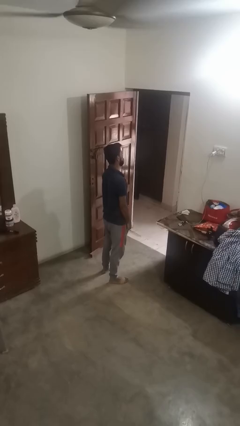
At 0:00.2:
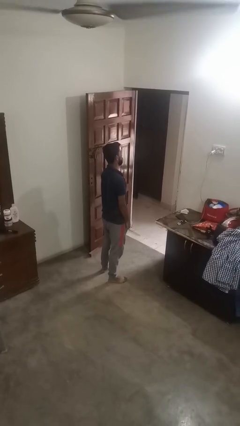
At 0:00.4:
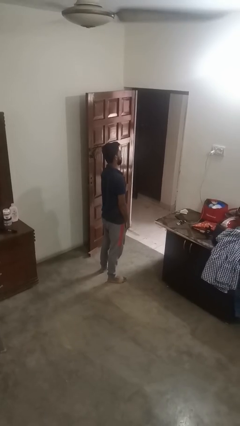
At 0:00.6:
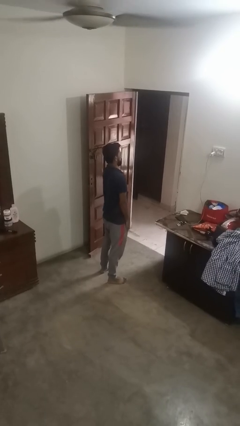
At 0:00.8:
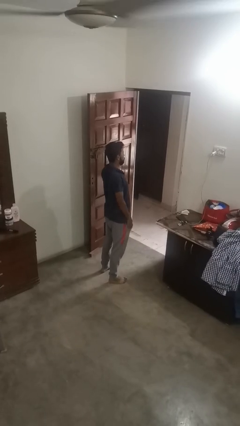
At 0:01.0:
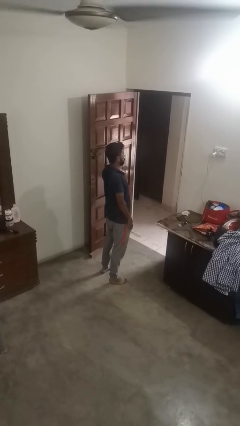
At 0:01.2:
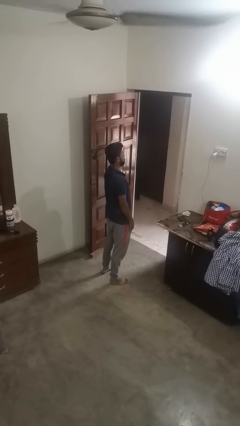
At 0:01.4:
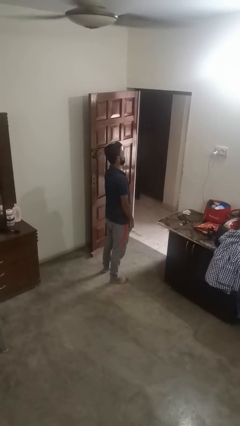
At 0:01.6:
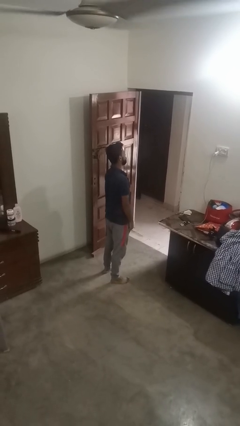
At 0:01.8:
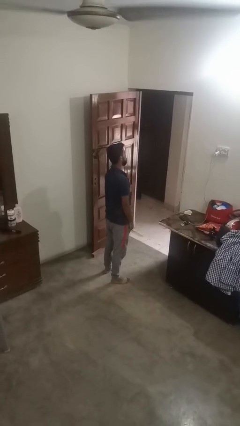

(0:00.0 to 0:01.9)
person shrugs

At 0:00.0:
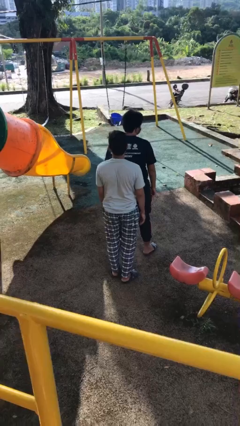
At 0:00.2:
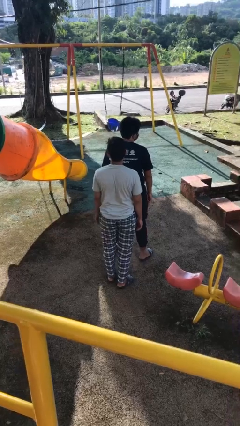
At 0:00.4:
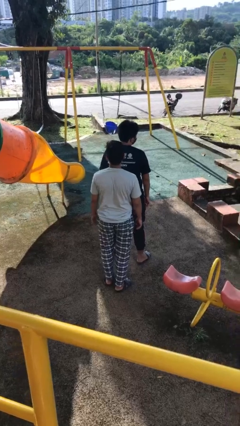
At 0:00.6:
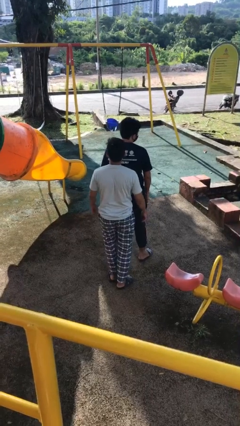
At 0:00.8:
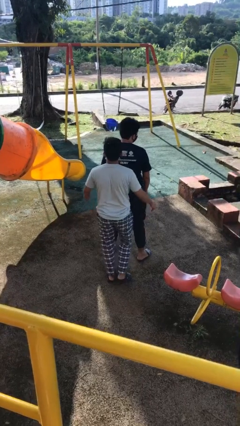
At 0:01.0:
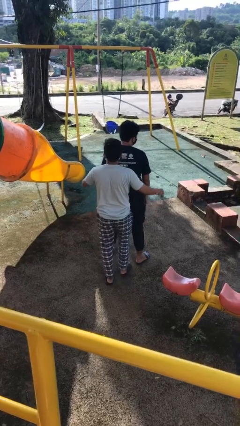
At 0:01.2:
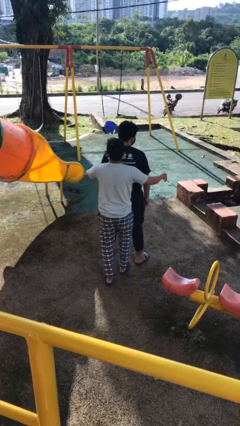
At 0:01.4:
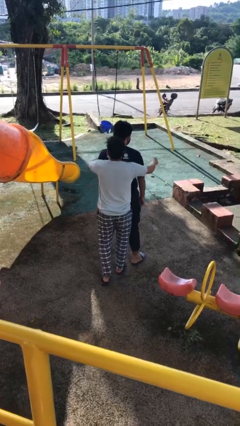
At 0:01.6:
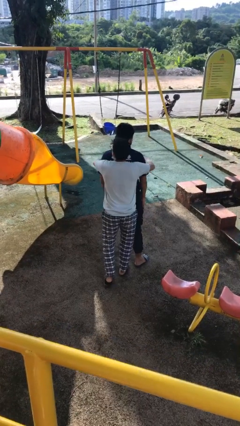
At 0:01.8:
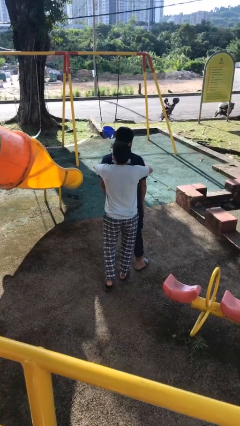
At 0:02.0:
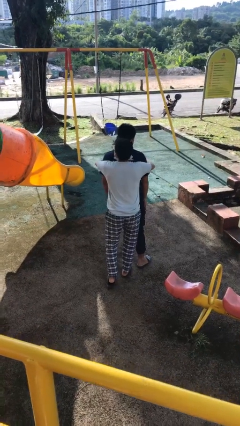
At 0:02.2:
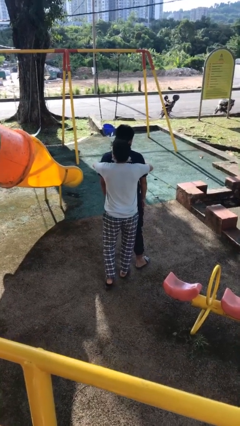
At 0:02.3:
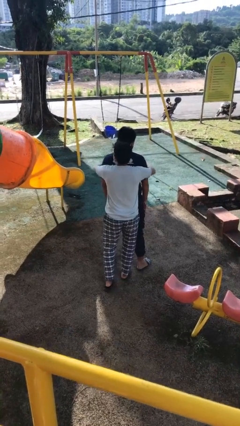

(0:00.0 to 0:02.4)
person hugs person from behind

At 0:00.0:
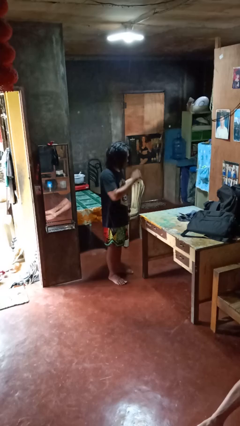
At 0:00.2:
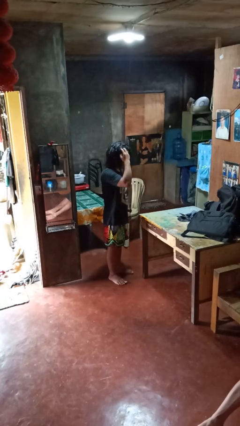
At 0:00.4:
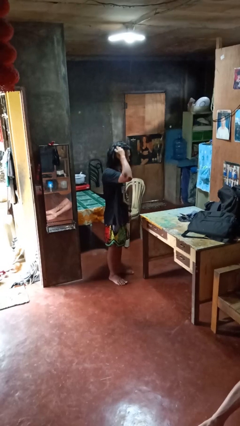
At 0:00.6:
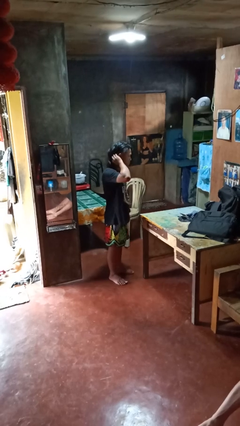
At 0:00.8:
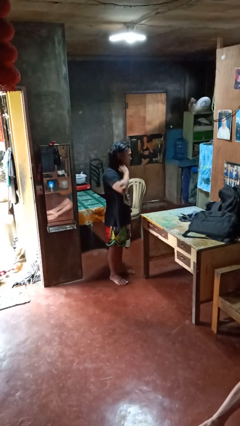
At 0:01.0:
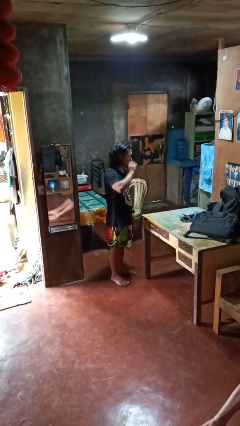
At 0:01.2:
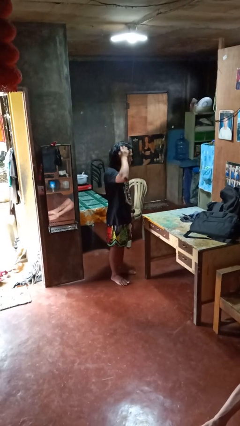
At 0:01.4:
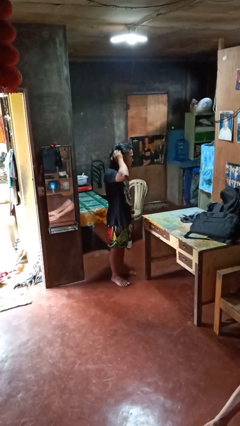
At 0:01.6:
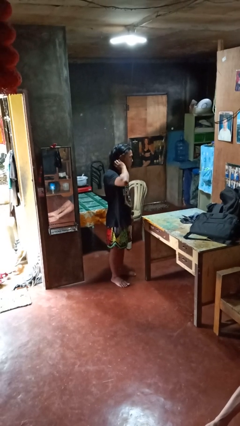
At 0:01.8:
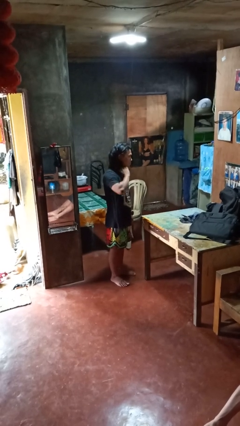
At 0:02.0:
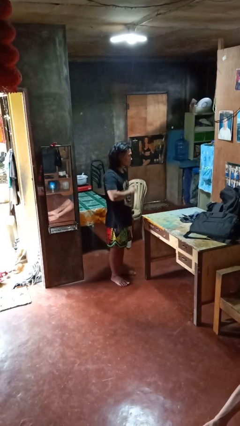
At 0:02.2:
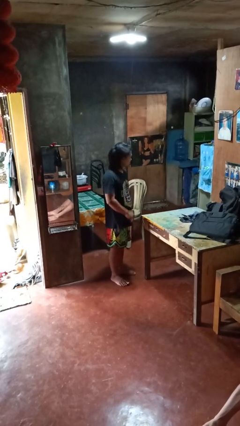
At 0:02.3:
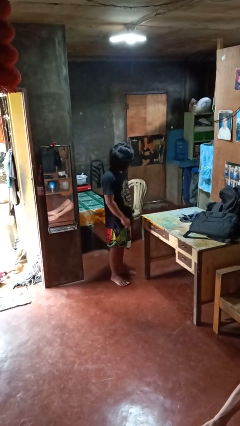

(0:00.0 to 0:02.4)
person strokes hair

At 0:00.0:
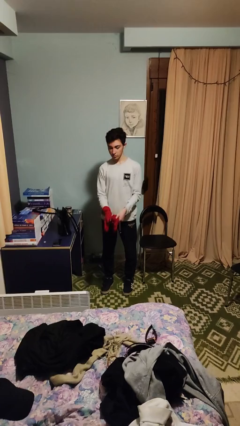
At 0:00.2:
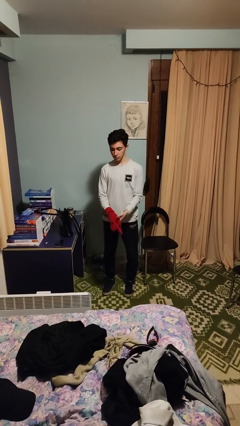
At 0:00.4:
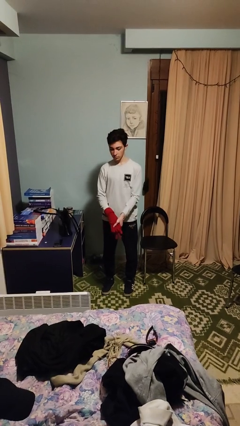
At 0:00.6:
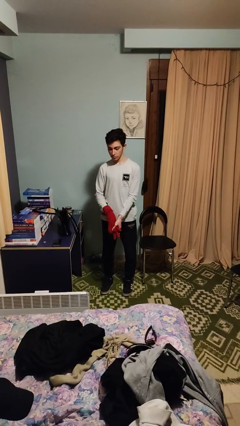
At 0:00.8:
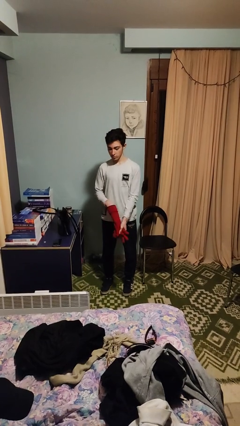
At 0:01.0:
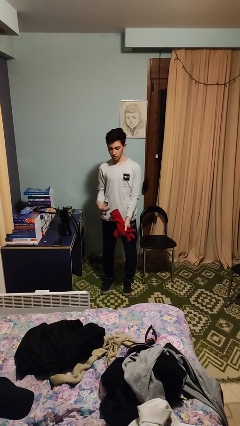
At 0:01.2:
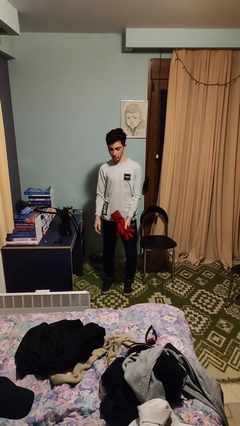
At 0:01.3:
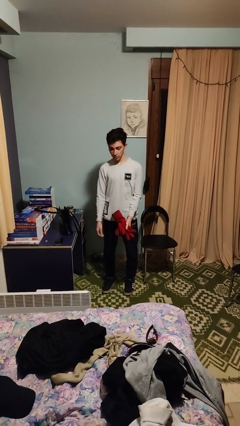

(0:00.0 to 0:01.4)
person takes off gloves

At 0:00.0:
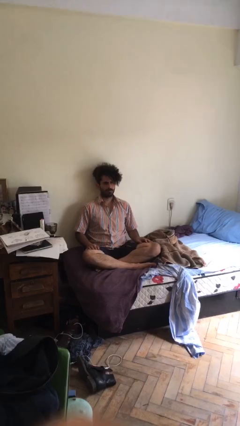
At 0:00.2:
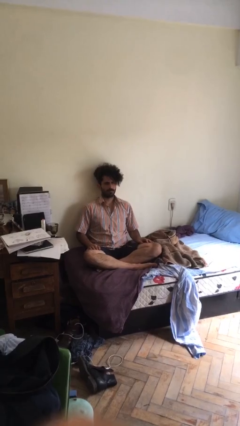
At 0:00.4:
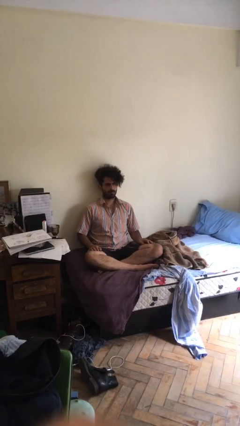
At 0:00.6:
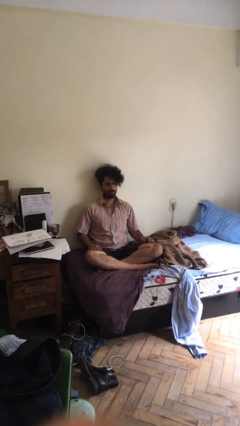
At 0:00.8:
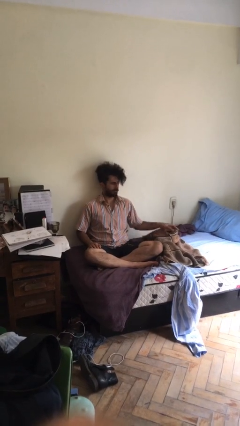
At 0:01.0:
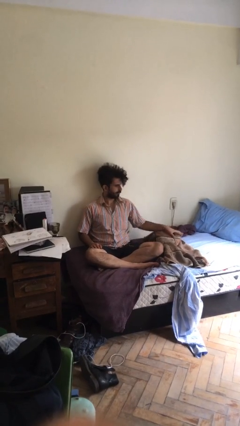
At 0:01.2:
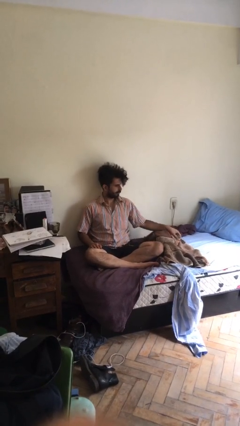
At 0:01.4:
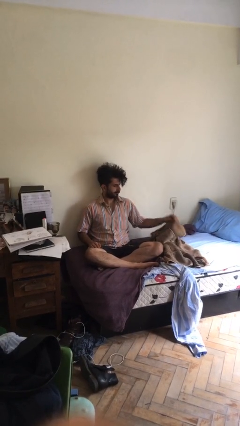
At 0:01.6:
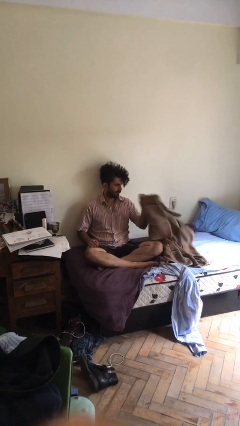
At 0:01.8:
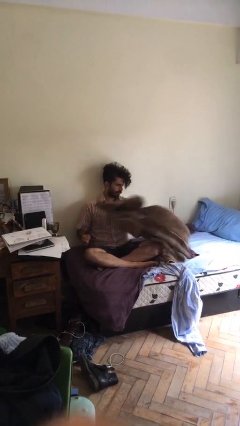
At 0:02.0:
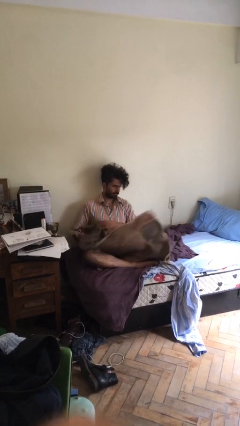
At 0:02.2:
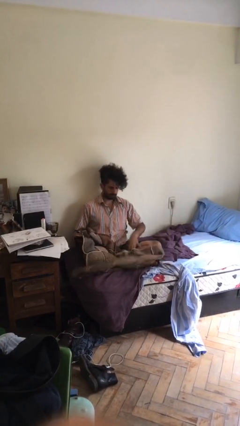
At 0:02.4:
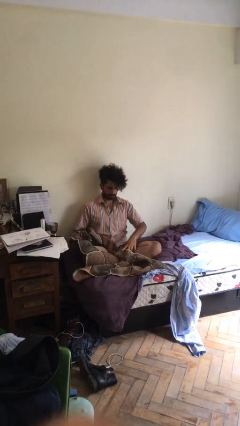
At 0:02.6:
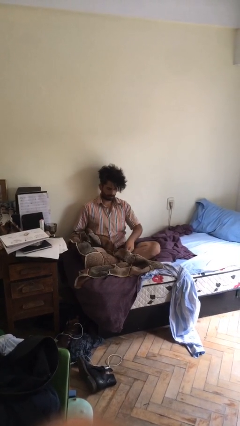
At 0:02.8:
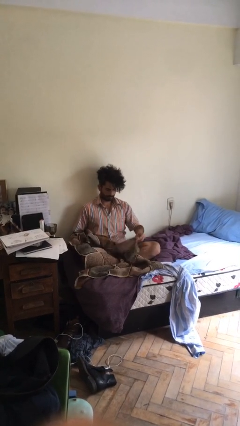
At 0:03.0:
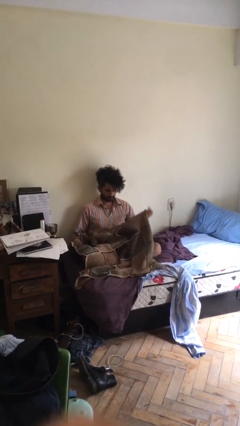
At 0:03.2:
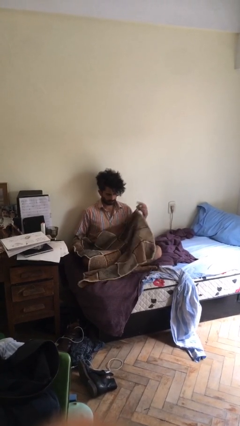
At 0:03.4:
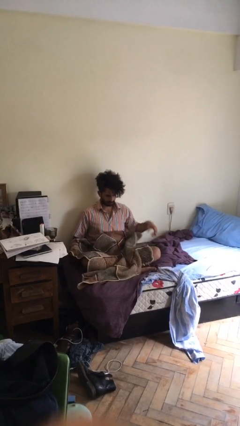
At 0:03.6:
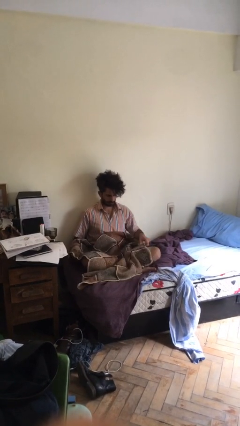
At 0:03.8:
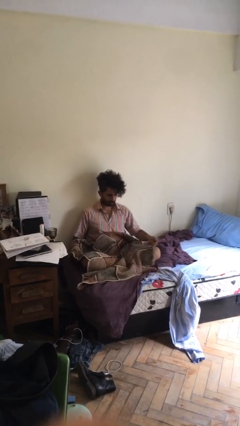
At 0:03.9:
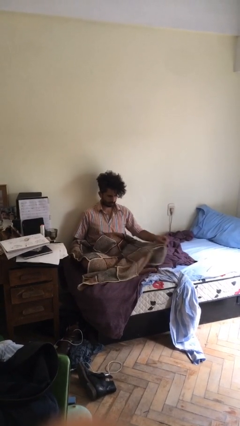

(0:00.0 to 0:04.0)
person covers with blanket

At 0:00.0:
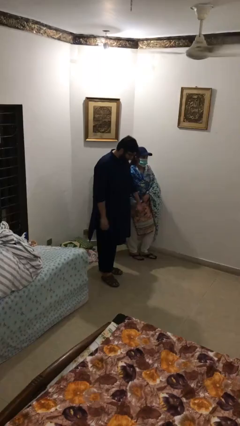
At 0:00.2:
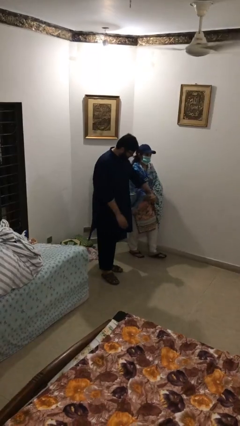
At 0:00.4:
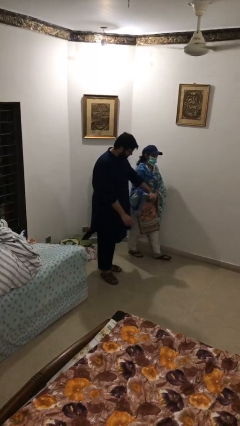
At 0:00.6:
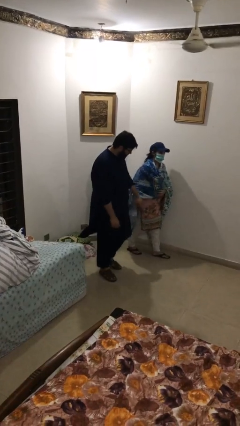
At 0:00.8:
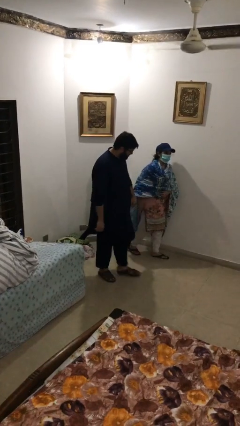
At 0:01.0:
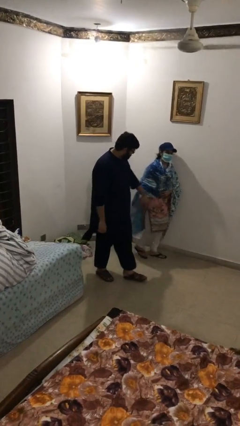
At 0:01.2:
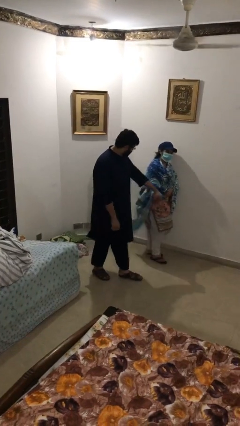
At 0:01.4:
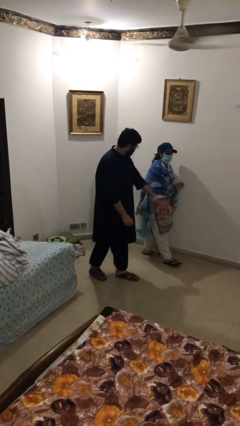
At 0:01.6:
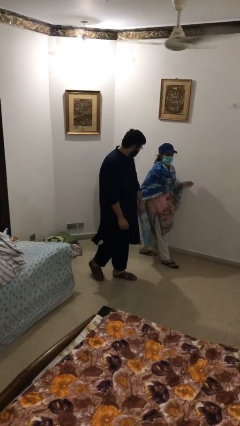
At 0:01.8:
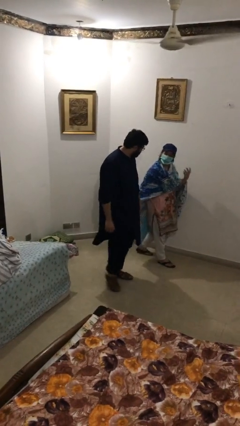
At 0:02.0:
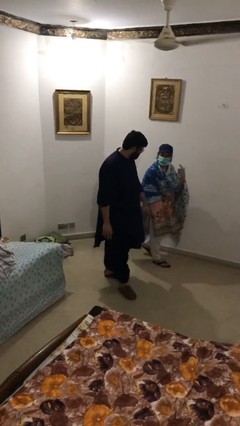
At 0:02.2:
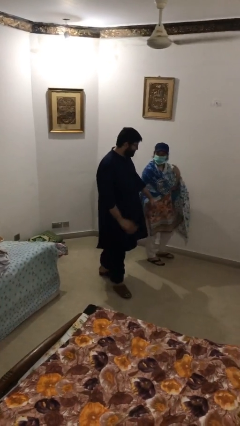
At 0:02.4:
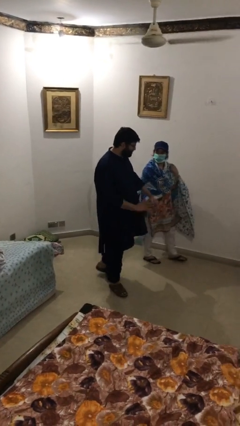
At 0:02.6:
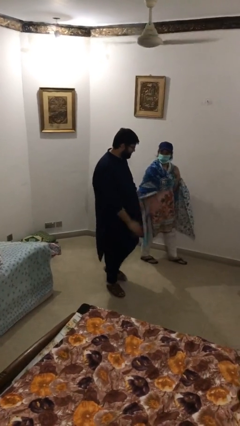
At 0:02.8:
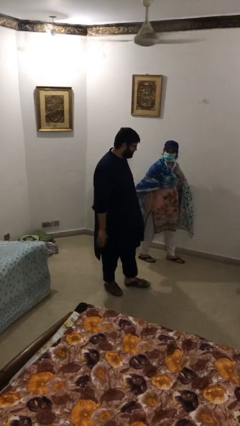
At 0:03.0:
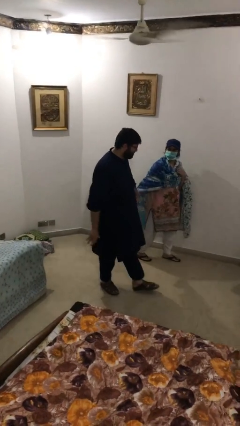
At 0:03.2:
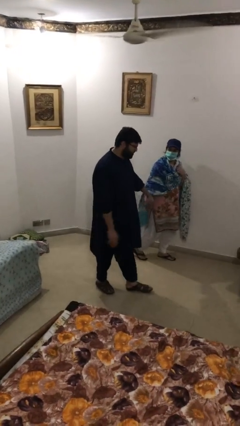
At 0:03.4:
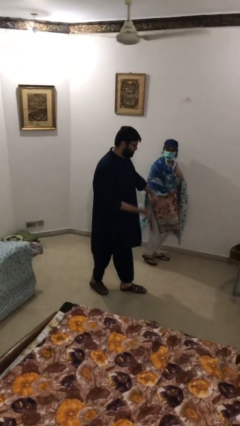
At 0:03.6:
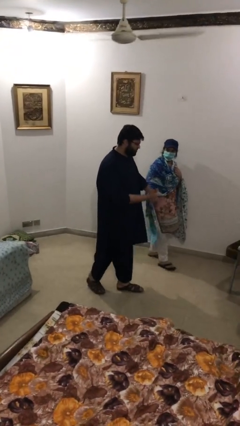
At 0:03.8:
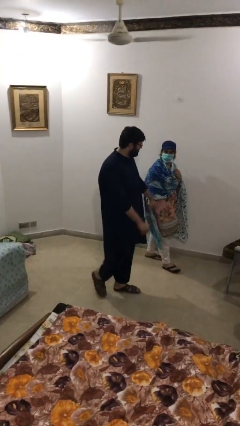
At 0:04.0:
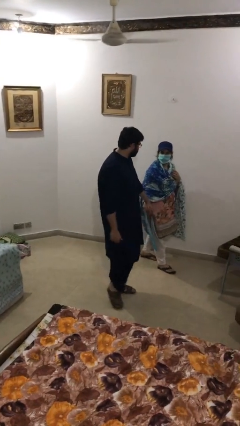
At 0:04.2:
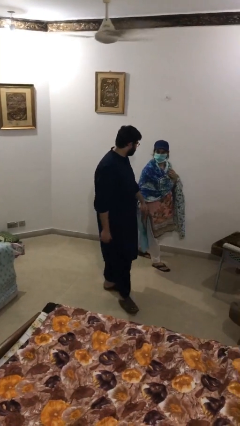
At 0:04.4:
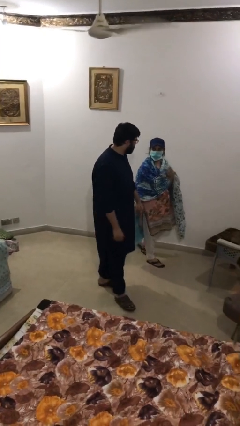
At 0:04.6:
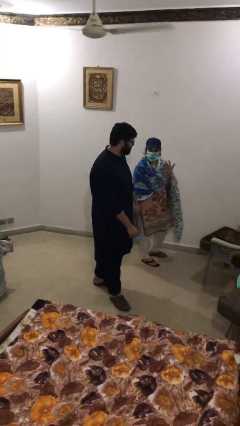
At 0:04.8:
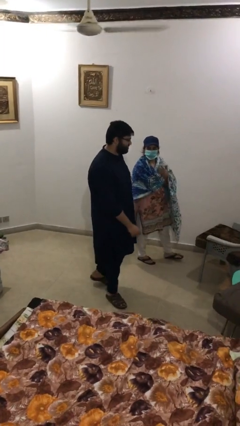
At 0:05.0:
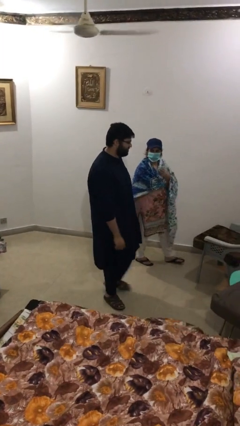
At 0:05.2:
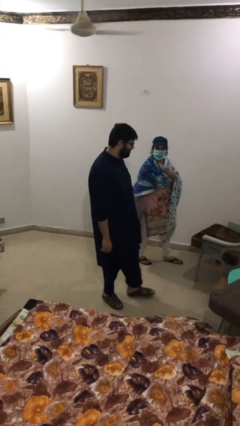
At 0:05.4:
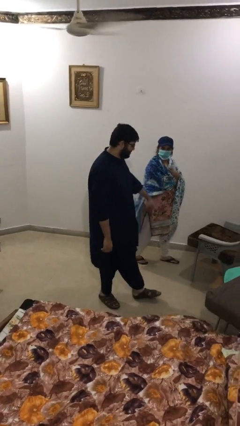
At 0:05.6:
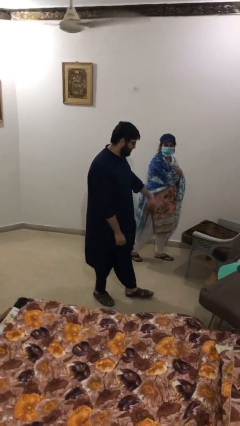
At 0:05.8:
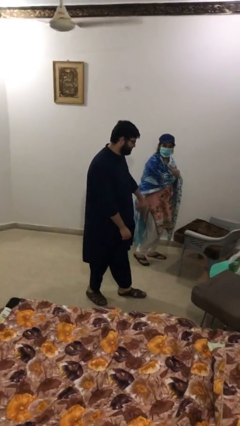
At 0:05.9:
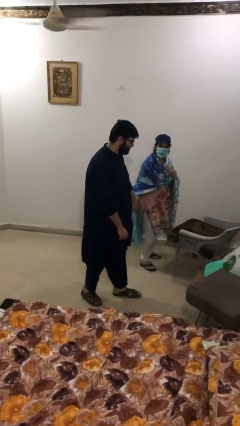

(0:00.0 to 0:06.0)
person holds hand
